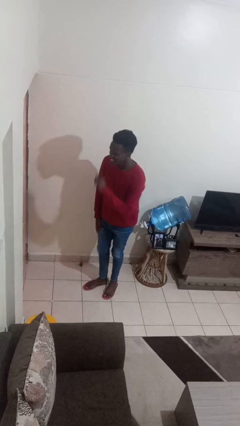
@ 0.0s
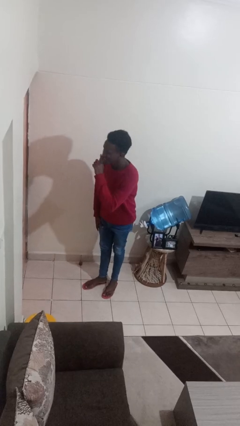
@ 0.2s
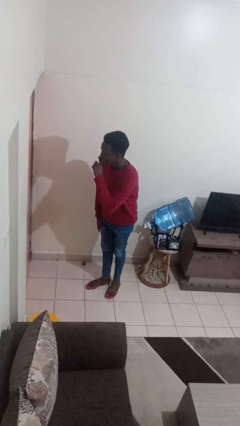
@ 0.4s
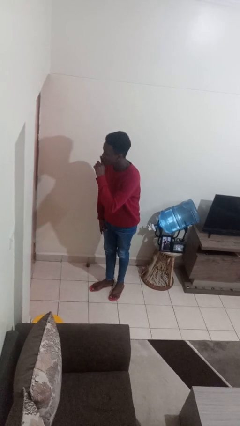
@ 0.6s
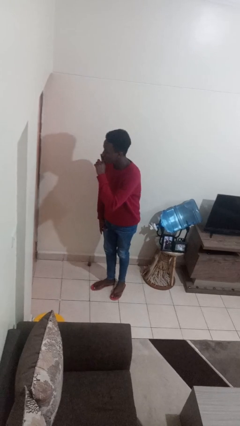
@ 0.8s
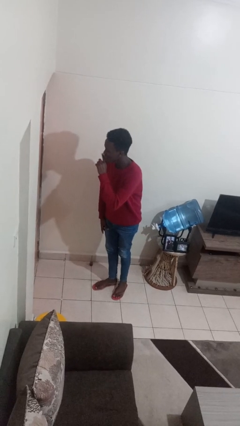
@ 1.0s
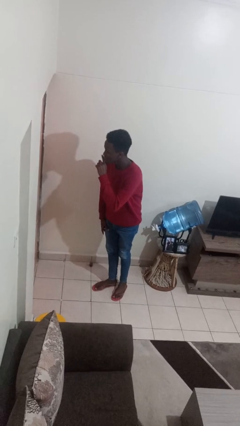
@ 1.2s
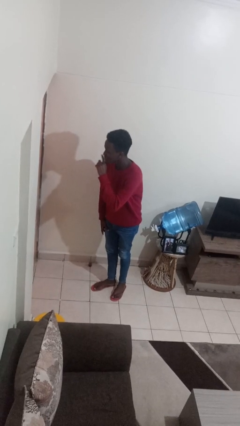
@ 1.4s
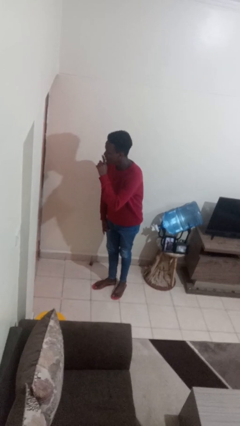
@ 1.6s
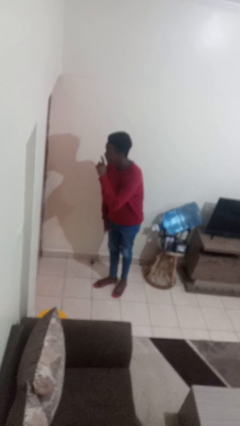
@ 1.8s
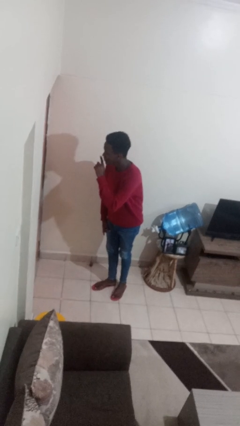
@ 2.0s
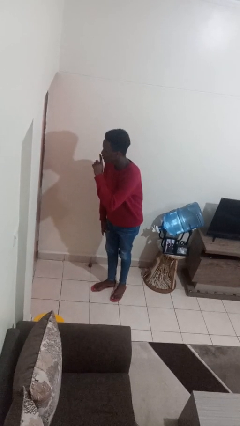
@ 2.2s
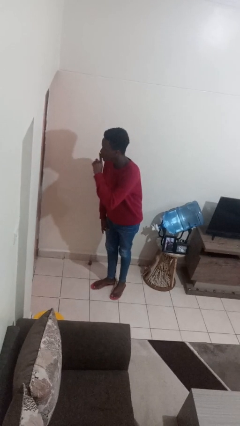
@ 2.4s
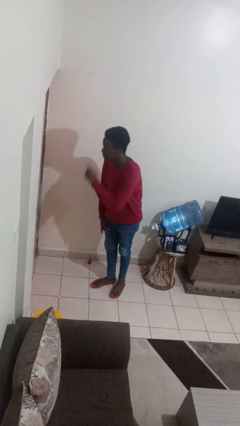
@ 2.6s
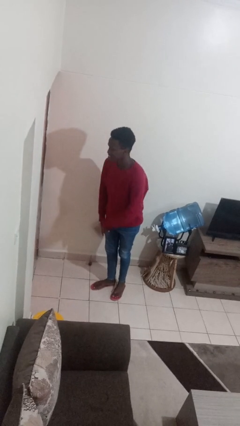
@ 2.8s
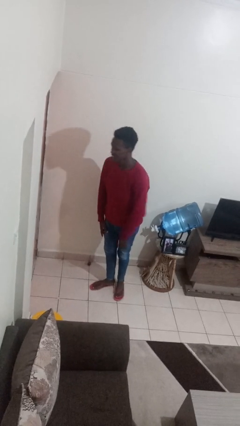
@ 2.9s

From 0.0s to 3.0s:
person gestures be quiet

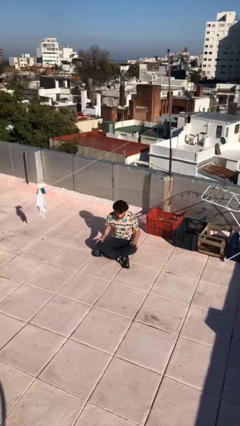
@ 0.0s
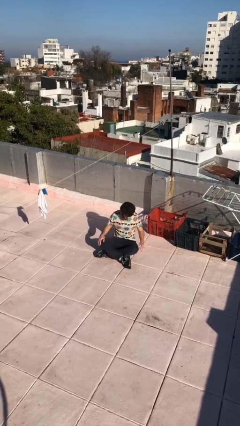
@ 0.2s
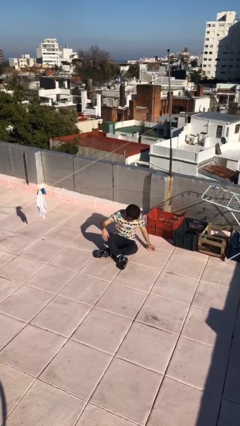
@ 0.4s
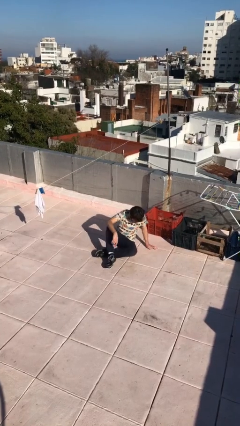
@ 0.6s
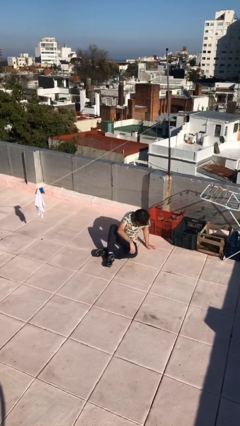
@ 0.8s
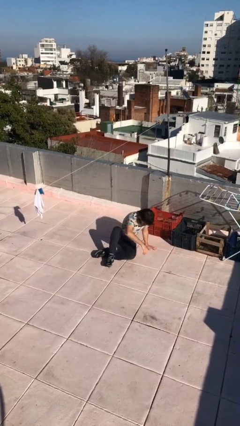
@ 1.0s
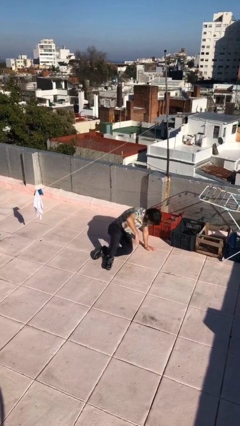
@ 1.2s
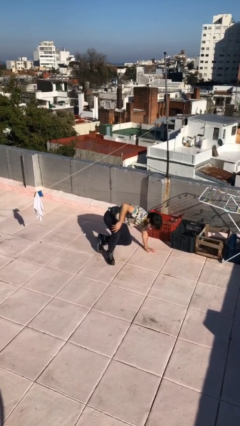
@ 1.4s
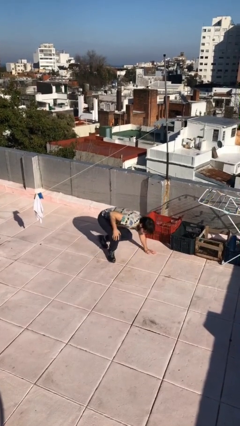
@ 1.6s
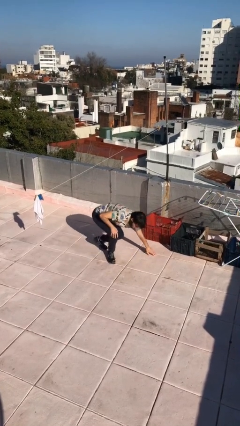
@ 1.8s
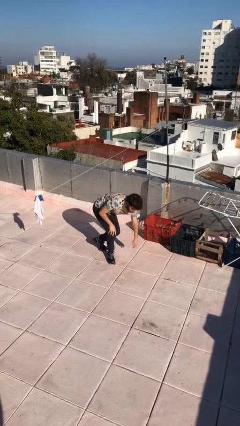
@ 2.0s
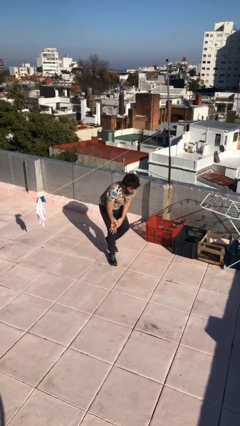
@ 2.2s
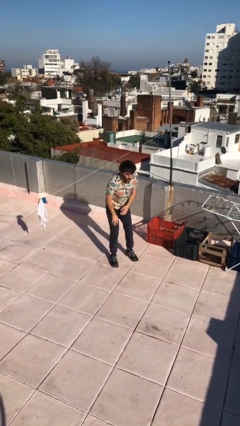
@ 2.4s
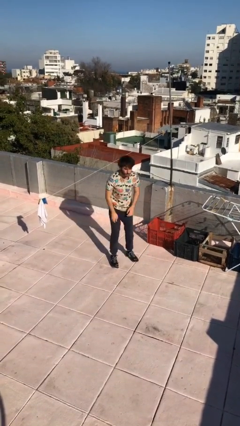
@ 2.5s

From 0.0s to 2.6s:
person stands up from floor

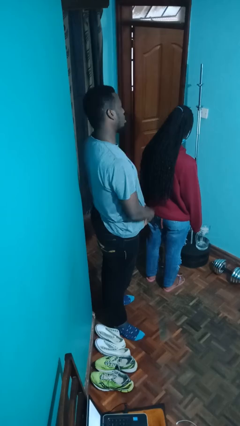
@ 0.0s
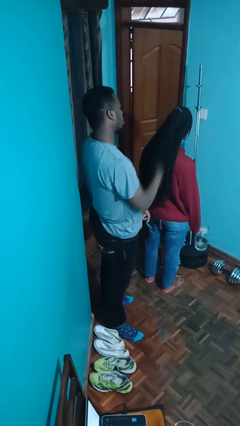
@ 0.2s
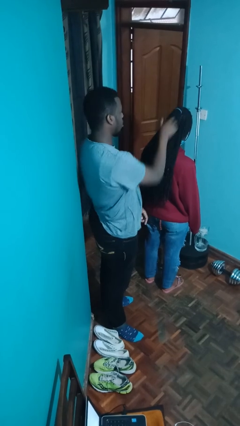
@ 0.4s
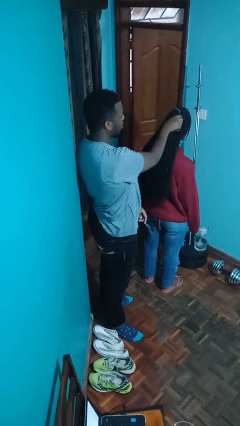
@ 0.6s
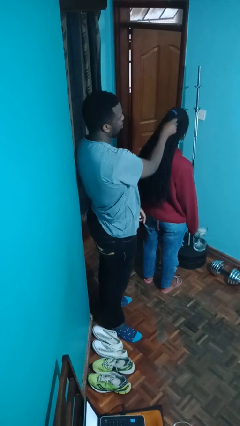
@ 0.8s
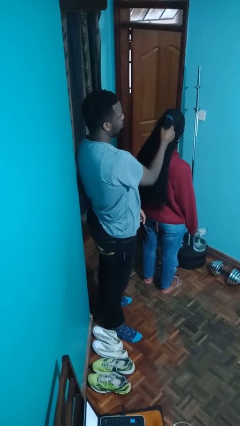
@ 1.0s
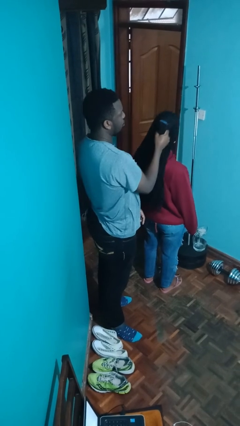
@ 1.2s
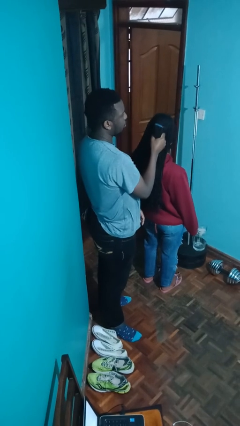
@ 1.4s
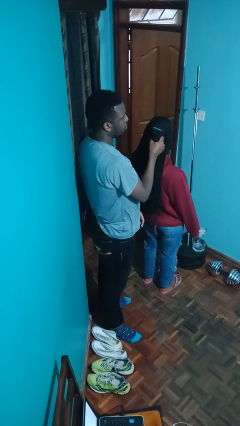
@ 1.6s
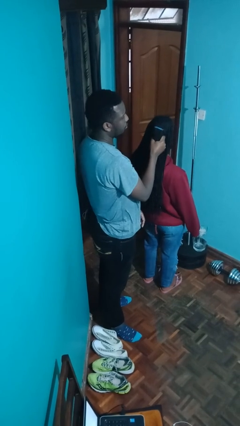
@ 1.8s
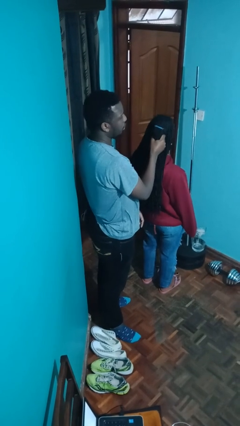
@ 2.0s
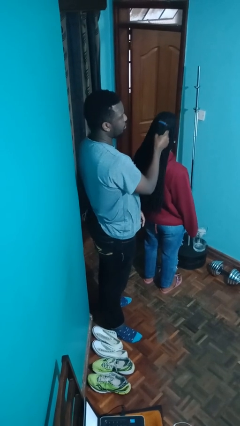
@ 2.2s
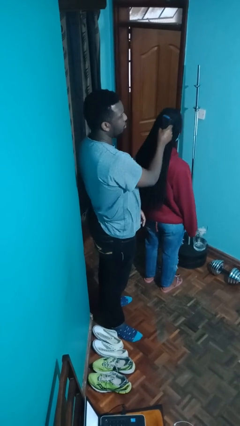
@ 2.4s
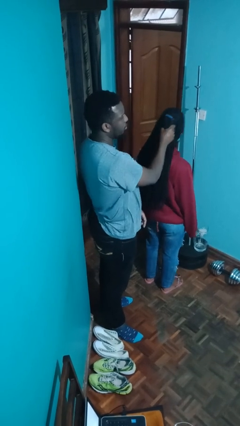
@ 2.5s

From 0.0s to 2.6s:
person grabs person by hair

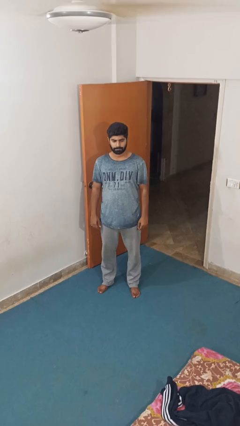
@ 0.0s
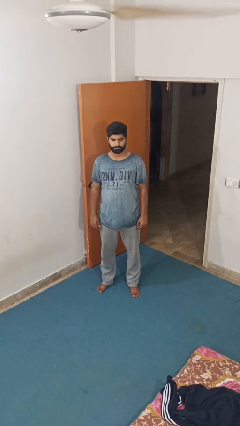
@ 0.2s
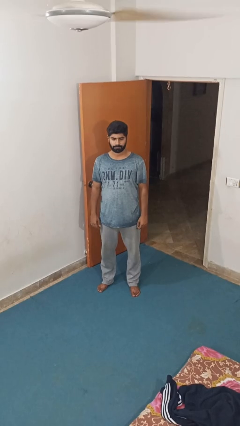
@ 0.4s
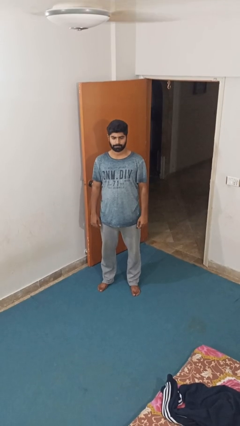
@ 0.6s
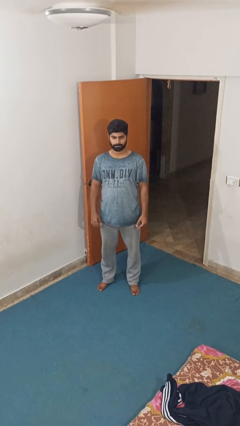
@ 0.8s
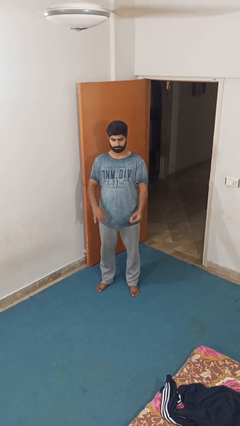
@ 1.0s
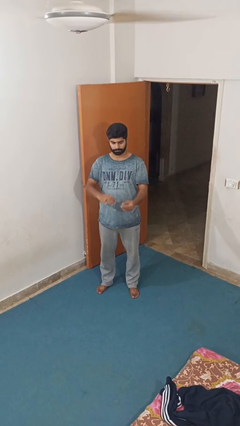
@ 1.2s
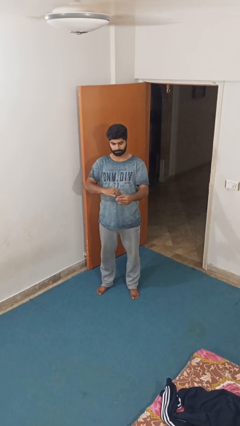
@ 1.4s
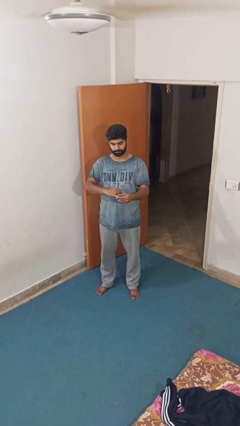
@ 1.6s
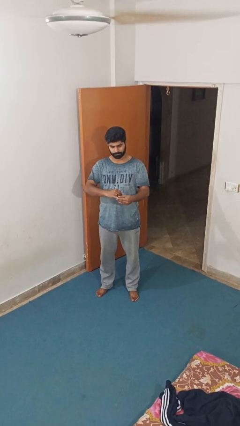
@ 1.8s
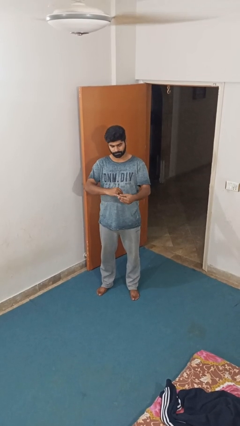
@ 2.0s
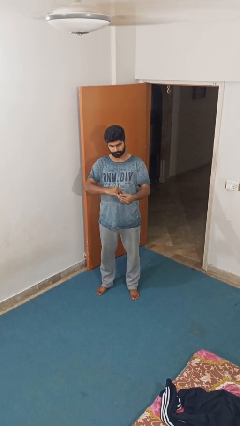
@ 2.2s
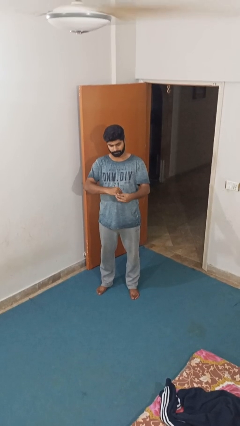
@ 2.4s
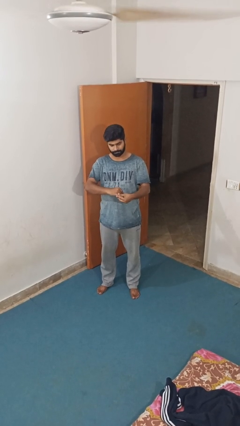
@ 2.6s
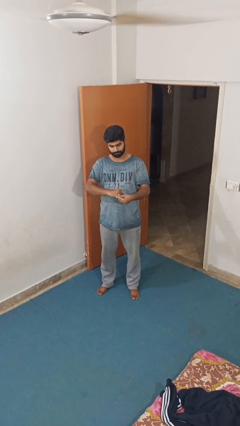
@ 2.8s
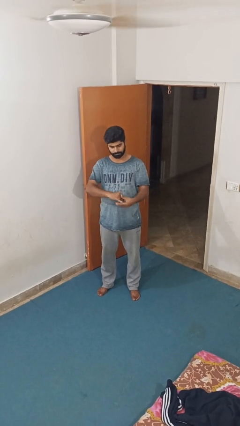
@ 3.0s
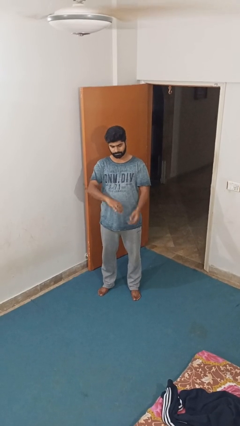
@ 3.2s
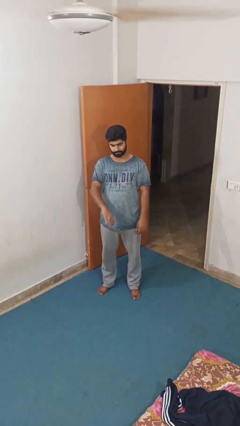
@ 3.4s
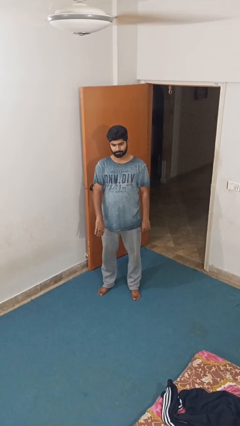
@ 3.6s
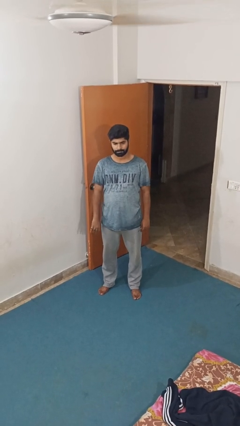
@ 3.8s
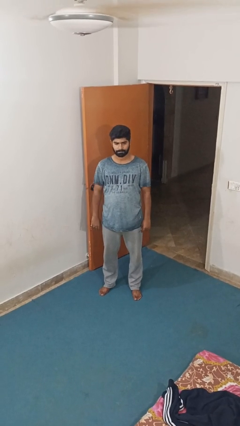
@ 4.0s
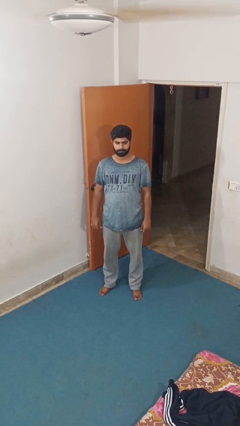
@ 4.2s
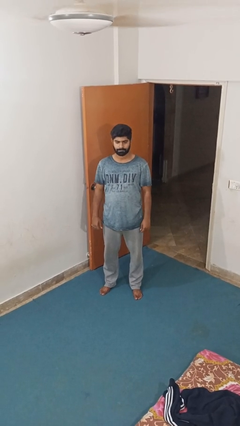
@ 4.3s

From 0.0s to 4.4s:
person puts on ring

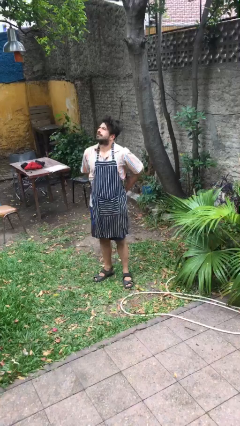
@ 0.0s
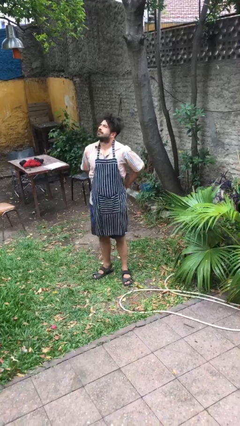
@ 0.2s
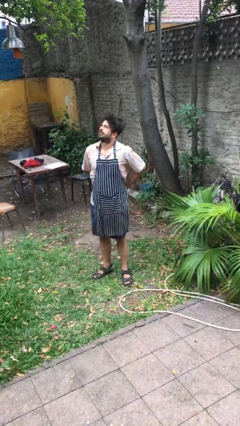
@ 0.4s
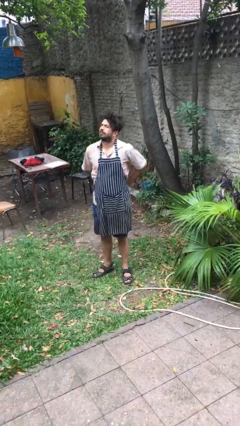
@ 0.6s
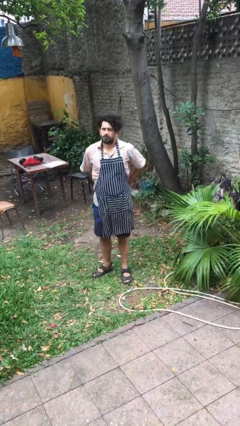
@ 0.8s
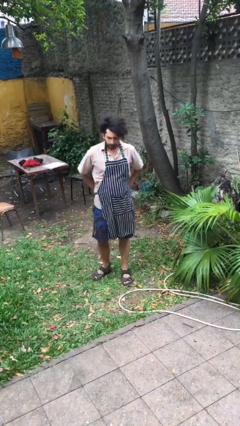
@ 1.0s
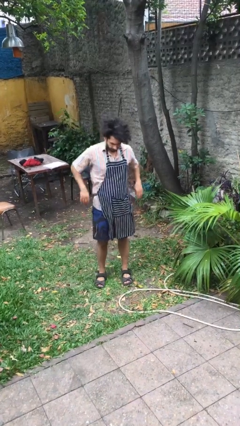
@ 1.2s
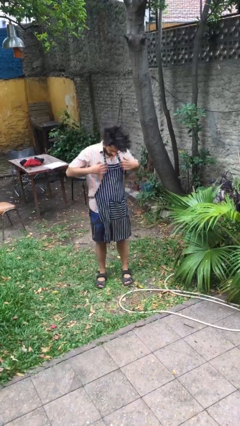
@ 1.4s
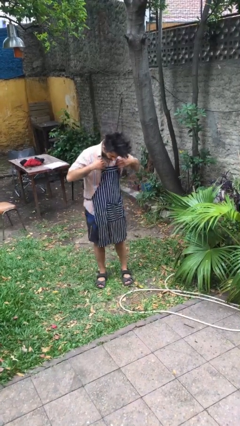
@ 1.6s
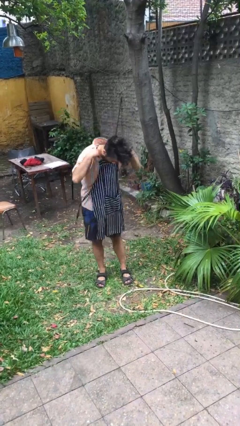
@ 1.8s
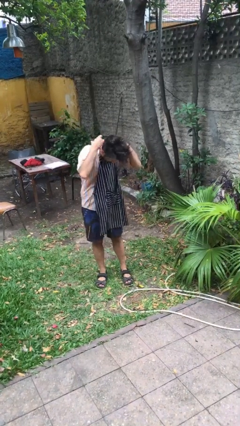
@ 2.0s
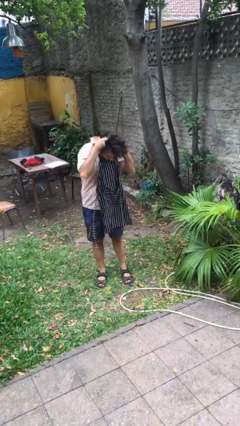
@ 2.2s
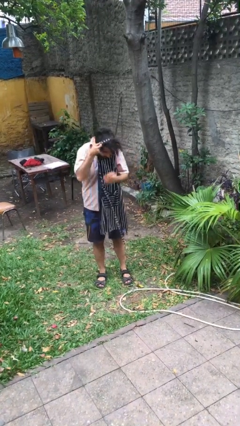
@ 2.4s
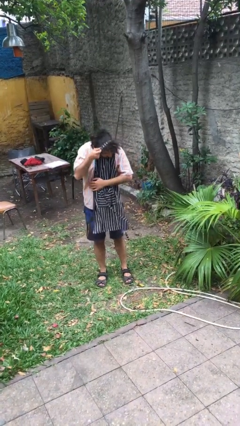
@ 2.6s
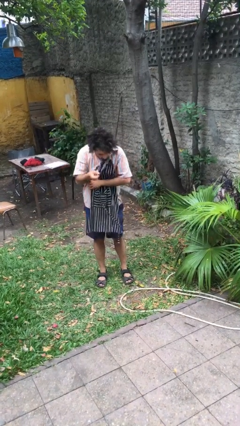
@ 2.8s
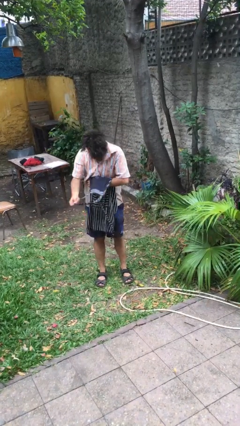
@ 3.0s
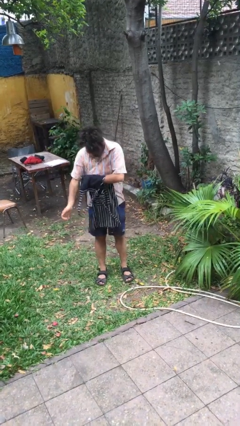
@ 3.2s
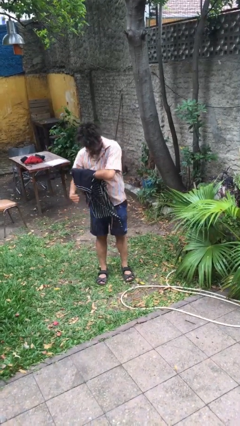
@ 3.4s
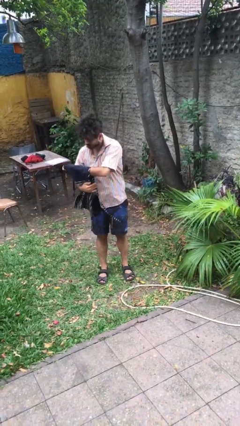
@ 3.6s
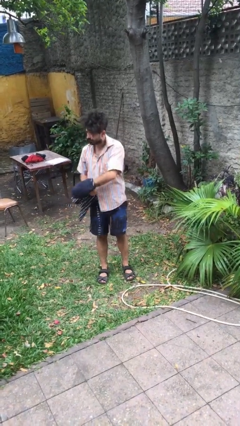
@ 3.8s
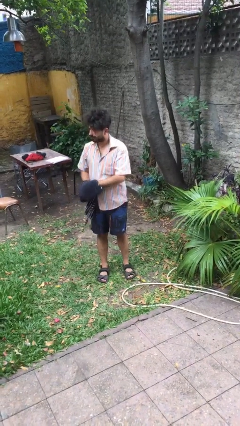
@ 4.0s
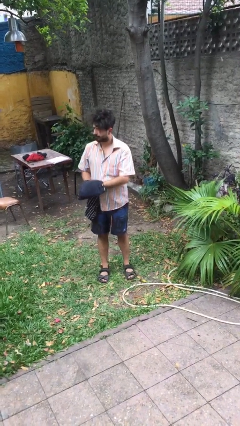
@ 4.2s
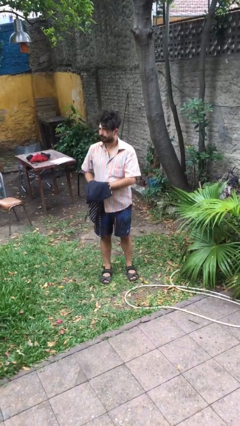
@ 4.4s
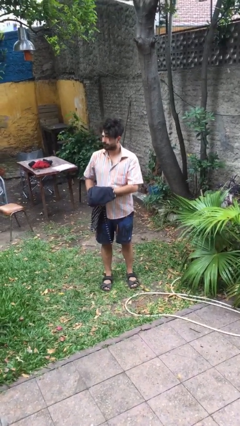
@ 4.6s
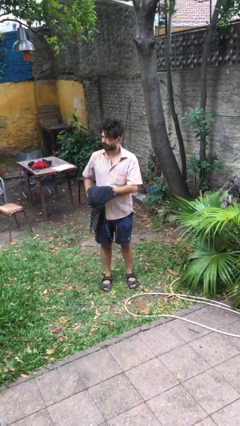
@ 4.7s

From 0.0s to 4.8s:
person takes off apron

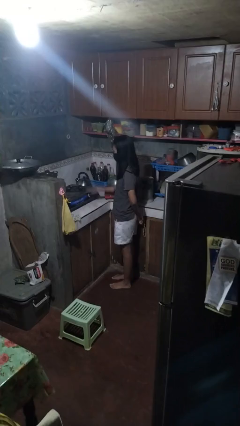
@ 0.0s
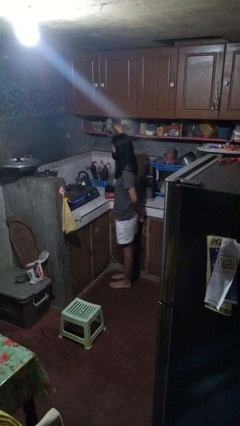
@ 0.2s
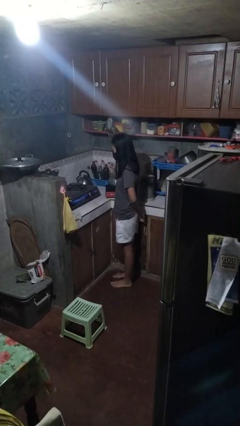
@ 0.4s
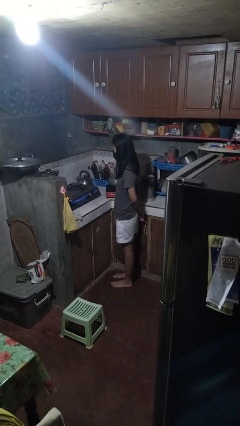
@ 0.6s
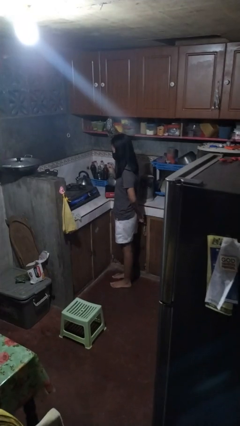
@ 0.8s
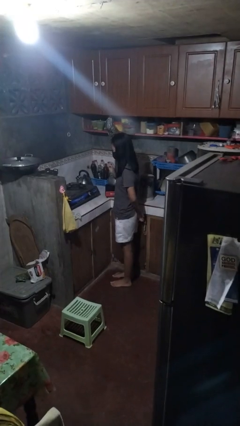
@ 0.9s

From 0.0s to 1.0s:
person burns hand
